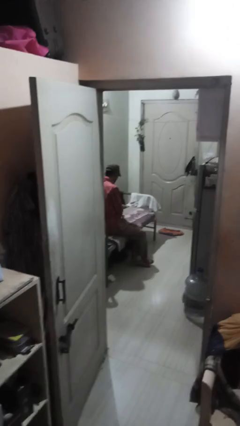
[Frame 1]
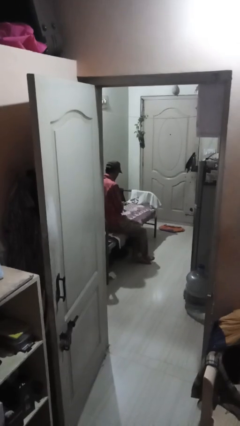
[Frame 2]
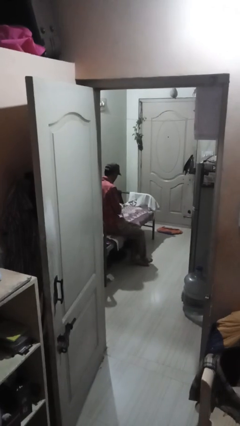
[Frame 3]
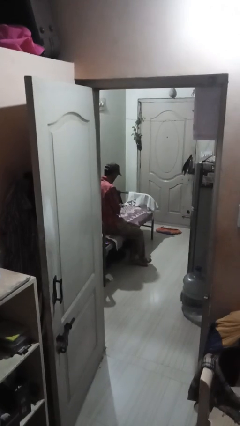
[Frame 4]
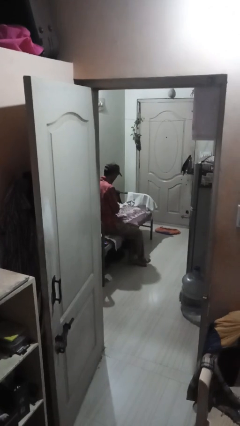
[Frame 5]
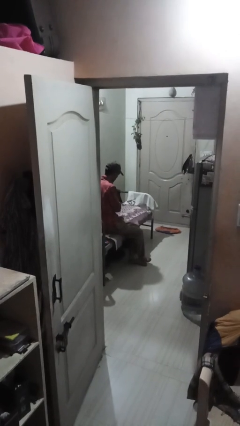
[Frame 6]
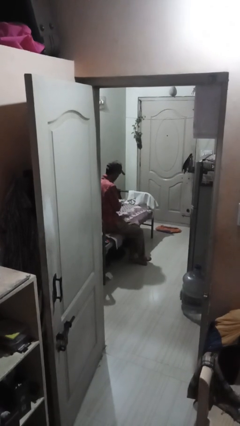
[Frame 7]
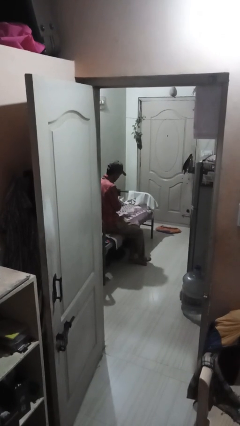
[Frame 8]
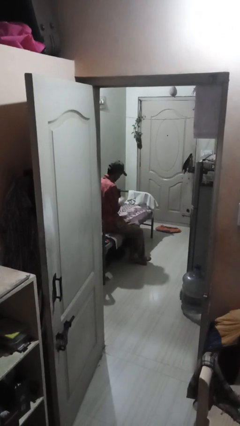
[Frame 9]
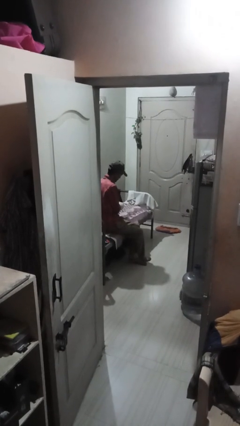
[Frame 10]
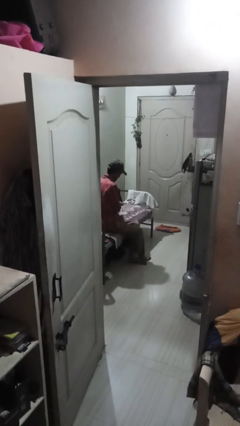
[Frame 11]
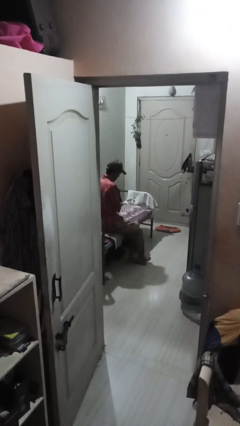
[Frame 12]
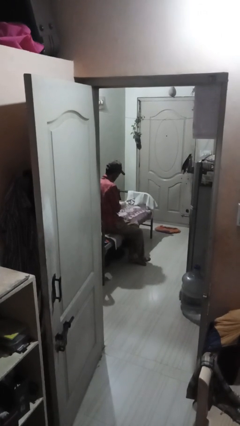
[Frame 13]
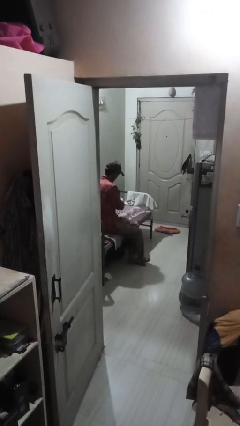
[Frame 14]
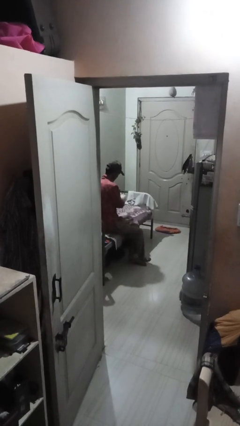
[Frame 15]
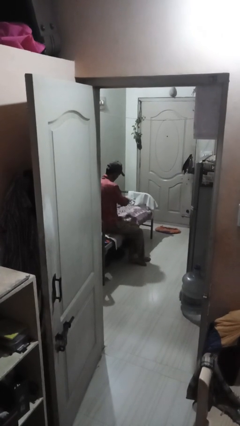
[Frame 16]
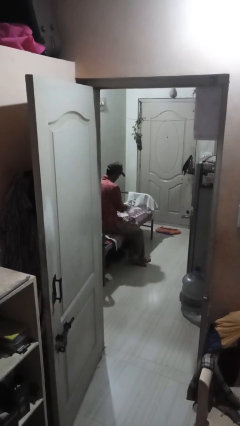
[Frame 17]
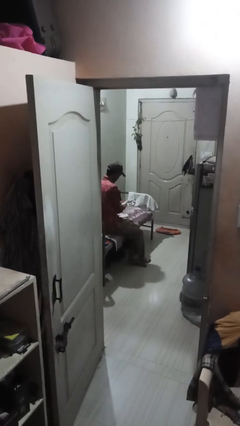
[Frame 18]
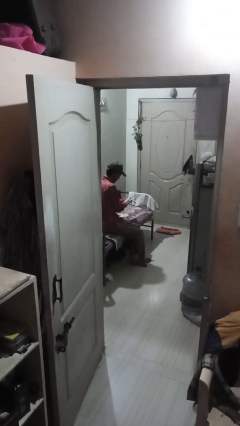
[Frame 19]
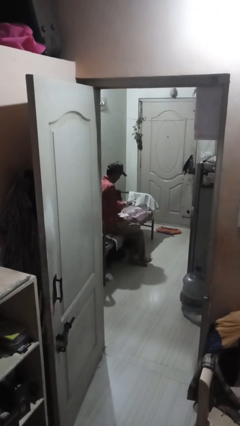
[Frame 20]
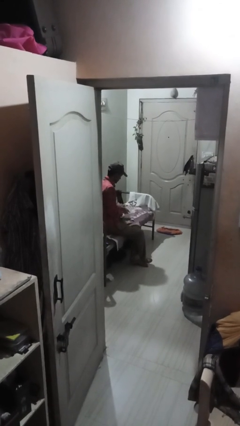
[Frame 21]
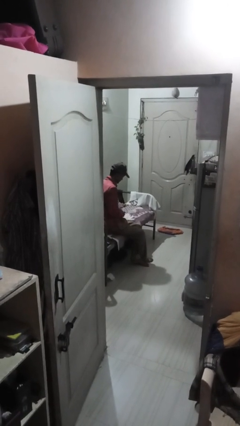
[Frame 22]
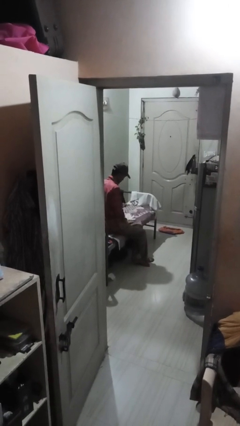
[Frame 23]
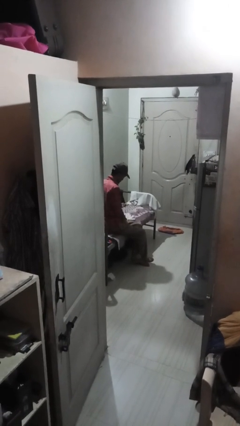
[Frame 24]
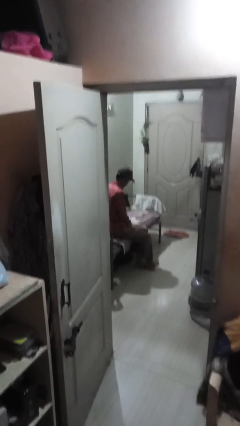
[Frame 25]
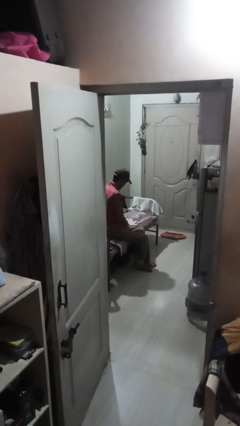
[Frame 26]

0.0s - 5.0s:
person takes off gloves

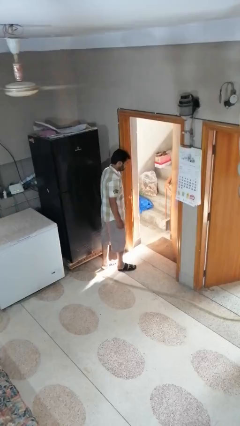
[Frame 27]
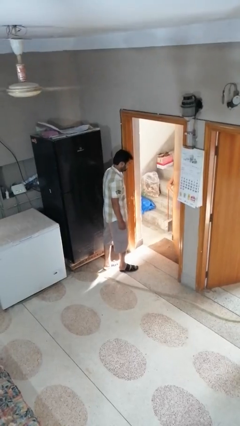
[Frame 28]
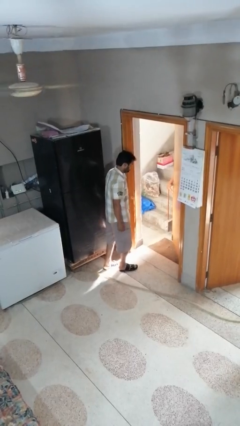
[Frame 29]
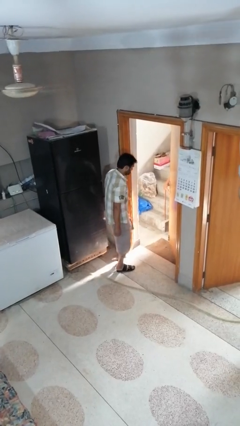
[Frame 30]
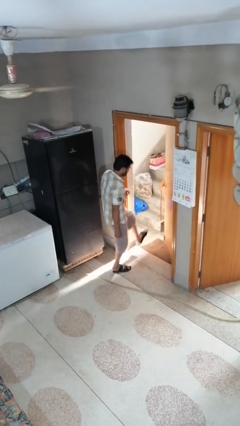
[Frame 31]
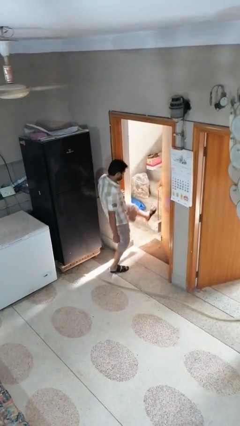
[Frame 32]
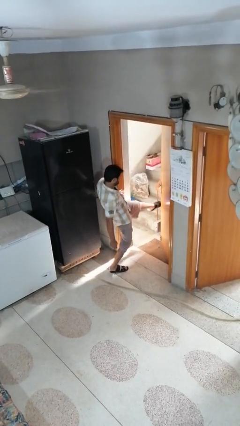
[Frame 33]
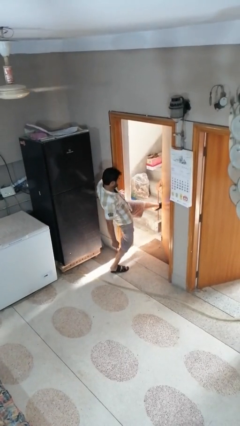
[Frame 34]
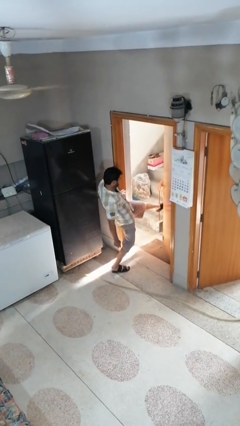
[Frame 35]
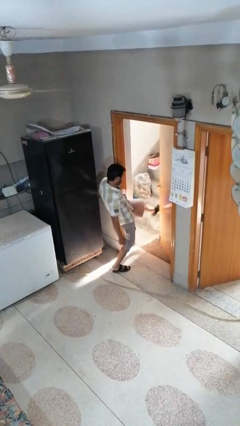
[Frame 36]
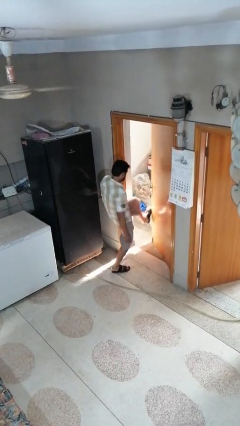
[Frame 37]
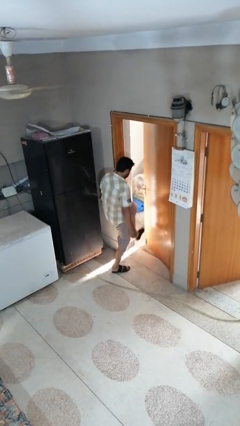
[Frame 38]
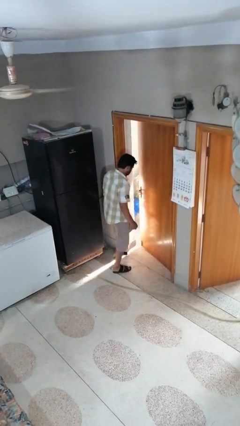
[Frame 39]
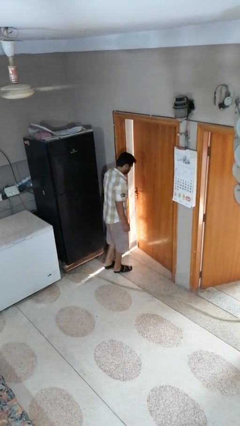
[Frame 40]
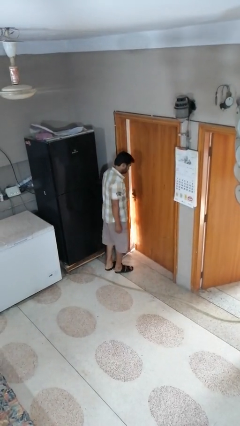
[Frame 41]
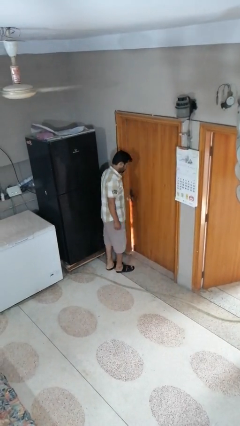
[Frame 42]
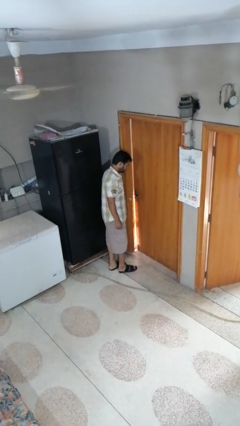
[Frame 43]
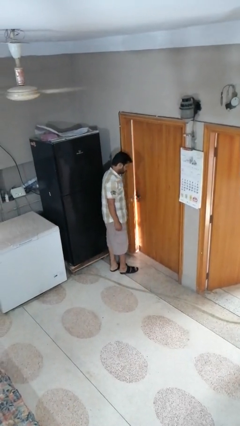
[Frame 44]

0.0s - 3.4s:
person closes door with foot

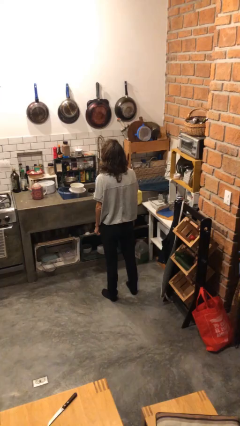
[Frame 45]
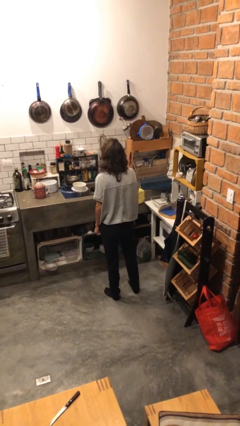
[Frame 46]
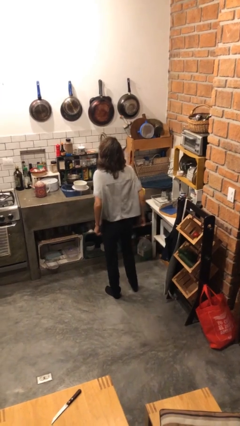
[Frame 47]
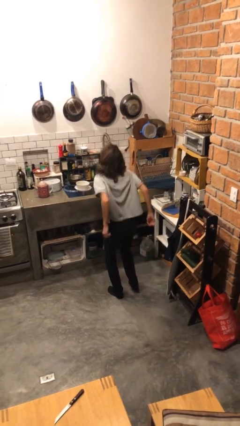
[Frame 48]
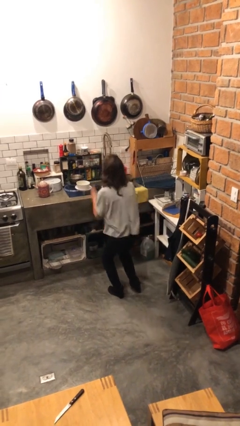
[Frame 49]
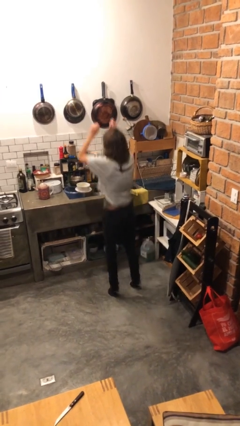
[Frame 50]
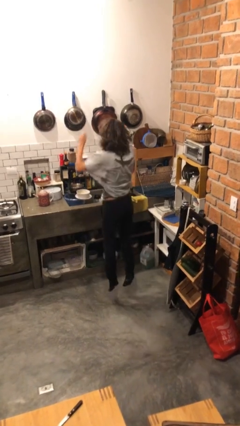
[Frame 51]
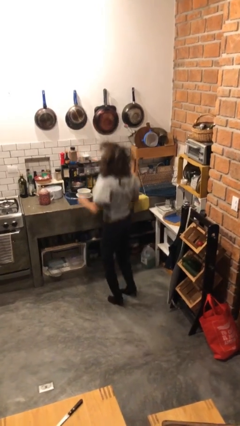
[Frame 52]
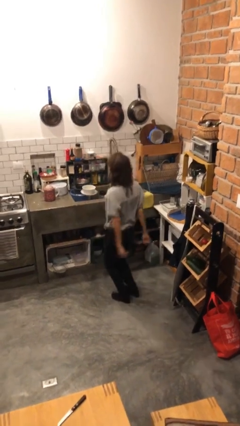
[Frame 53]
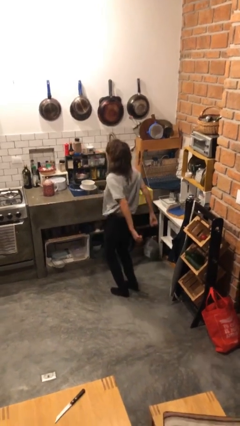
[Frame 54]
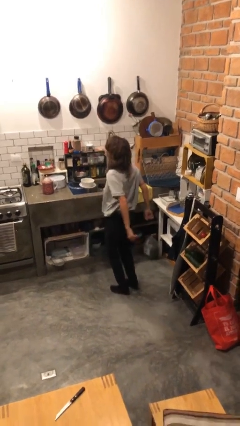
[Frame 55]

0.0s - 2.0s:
person jumps

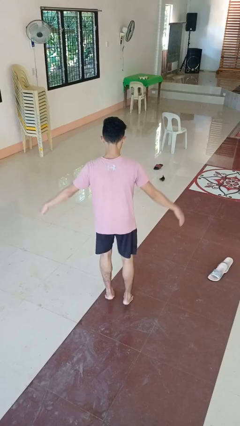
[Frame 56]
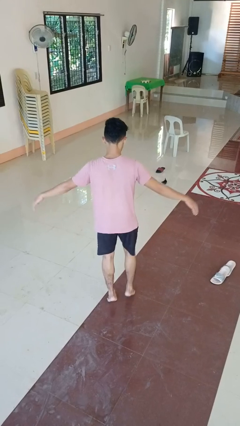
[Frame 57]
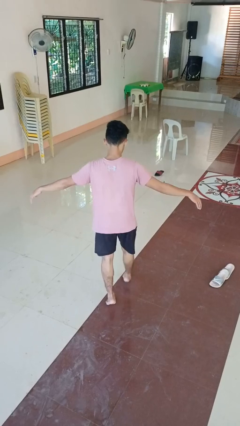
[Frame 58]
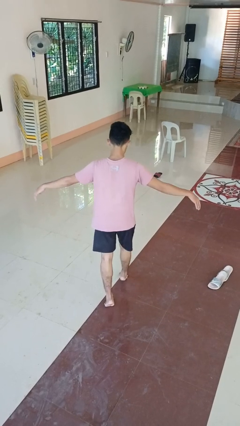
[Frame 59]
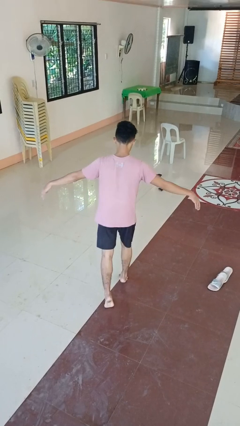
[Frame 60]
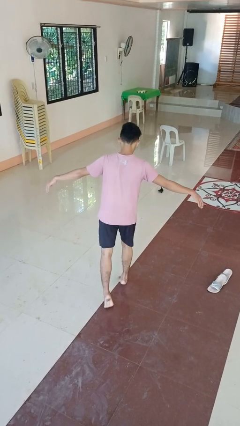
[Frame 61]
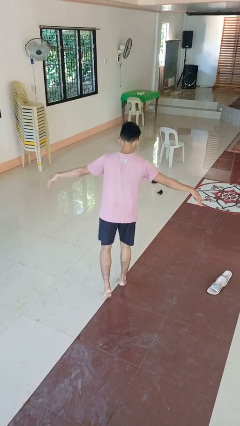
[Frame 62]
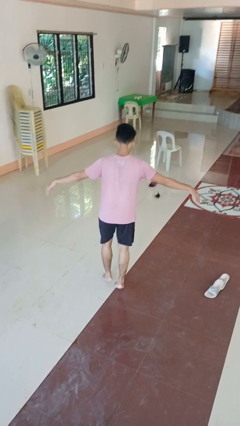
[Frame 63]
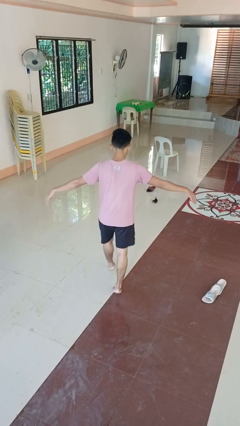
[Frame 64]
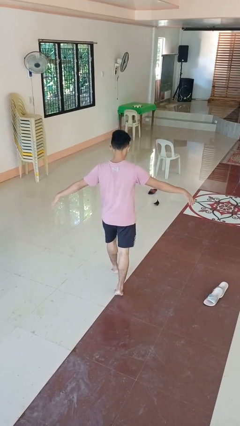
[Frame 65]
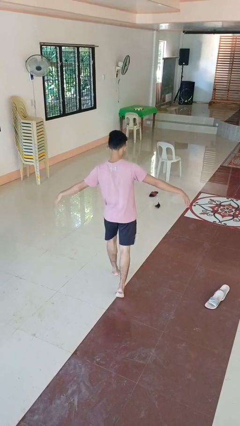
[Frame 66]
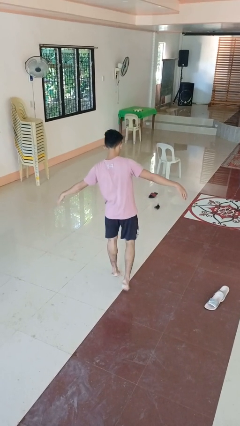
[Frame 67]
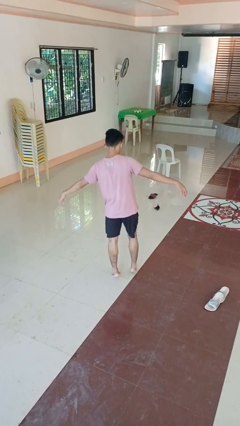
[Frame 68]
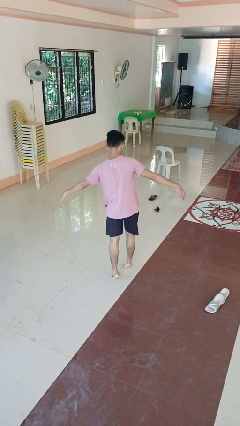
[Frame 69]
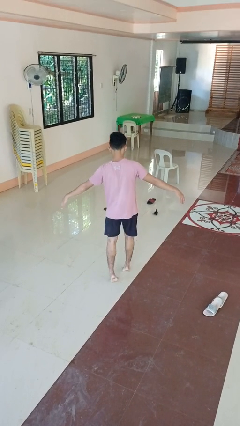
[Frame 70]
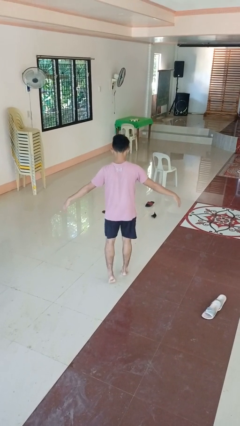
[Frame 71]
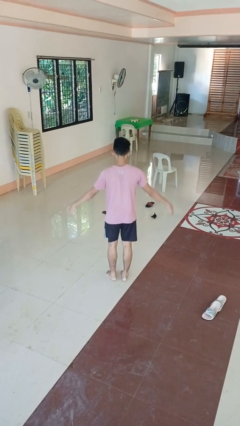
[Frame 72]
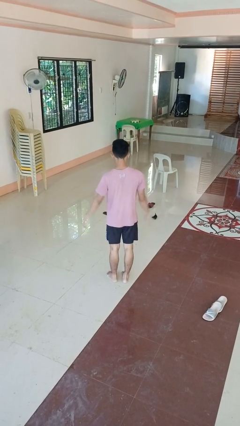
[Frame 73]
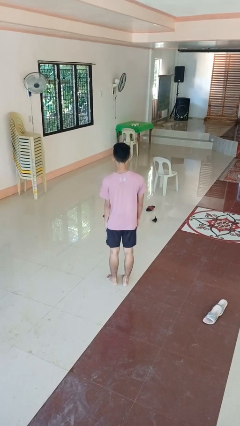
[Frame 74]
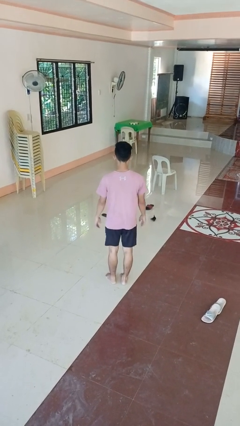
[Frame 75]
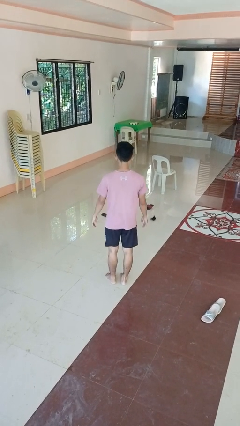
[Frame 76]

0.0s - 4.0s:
person walks tiptoe

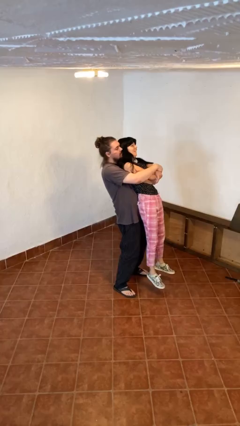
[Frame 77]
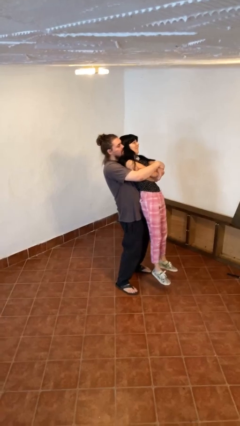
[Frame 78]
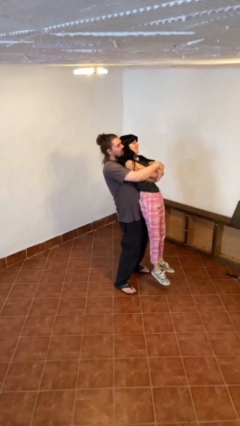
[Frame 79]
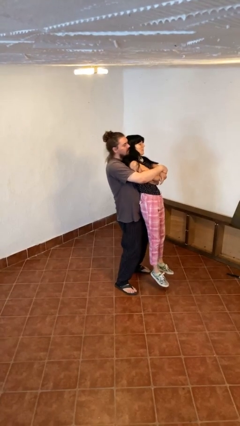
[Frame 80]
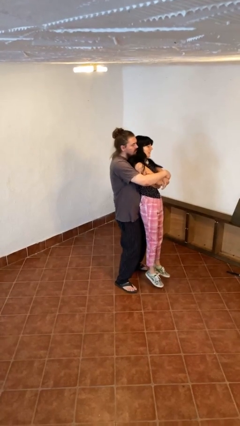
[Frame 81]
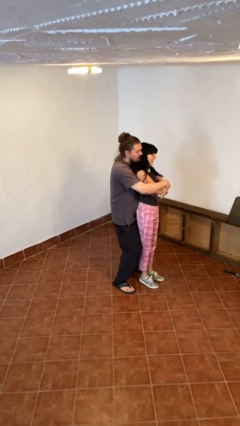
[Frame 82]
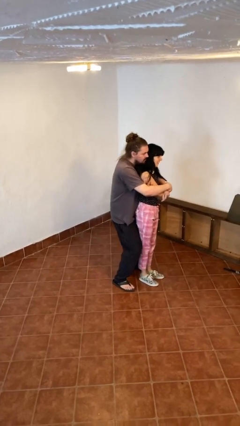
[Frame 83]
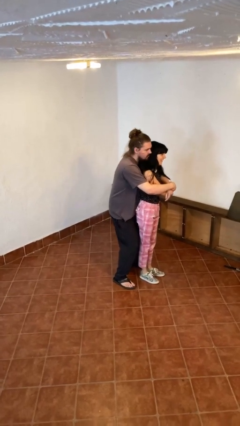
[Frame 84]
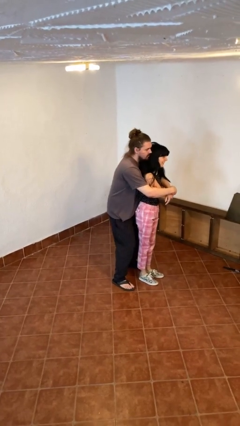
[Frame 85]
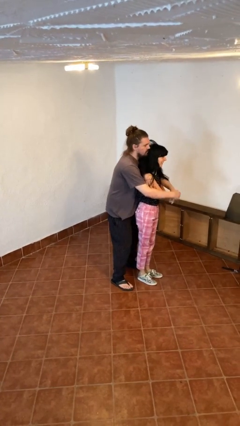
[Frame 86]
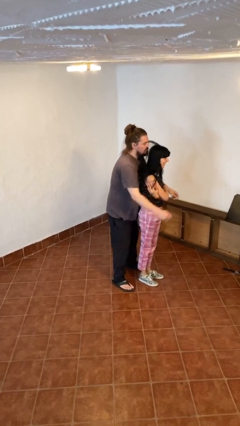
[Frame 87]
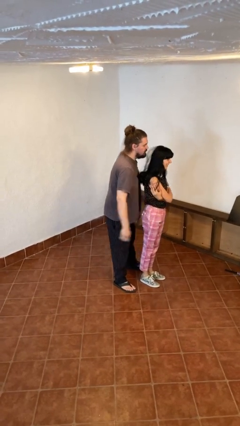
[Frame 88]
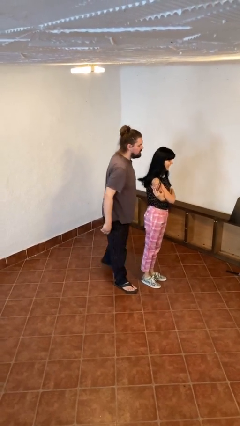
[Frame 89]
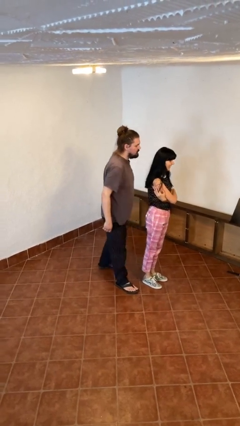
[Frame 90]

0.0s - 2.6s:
person puts down person

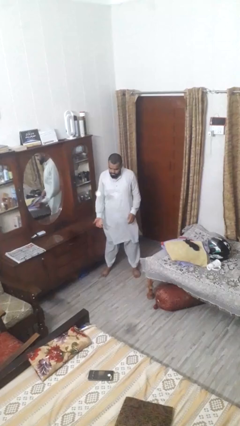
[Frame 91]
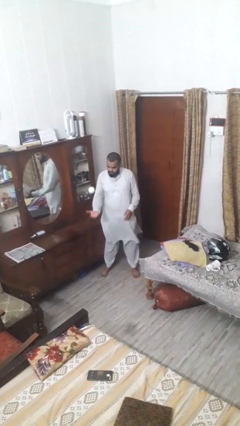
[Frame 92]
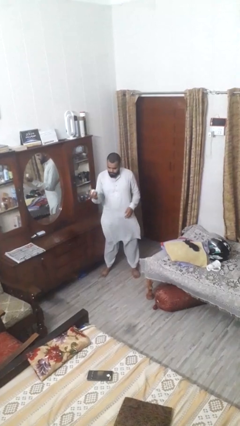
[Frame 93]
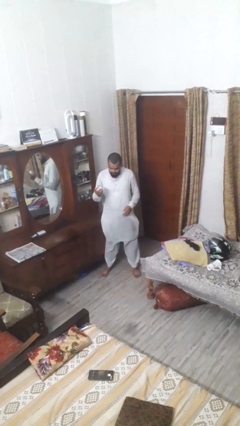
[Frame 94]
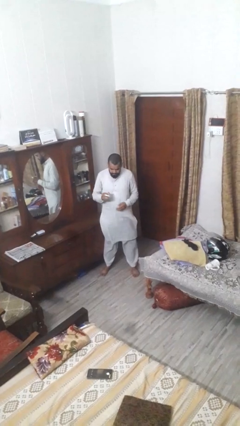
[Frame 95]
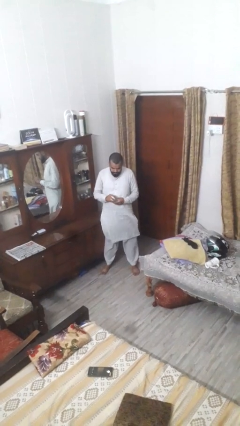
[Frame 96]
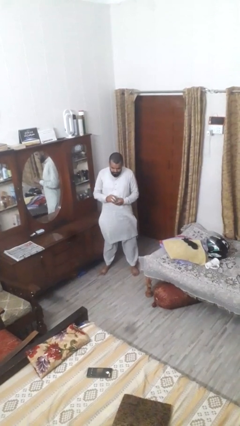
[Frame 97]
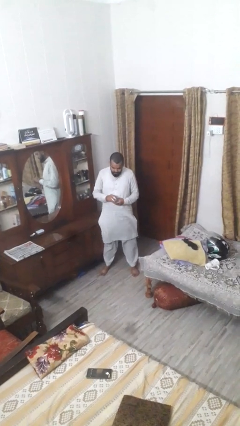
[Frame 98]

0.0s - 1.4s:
person bounces ball on floor
